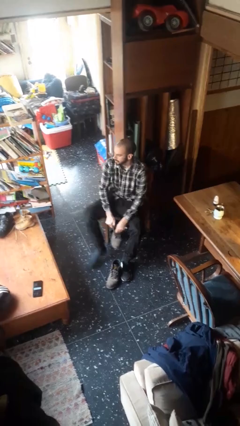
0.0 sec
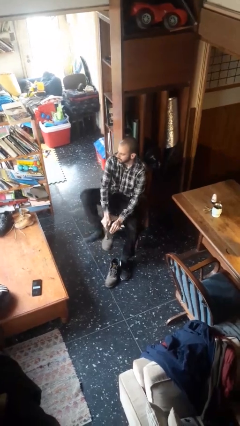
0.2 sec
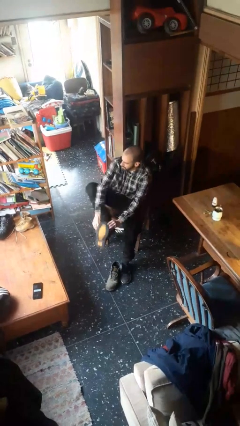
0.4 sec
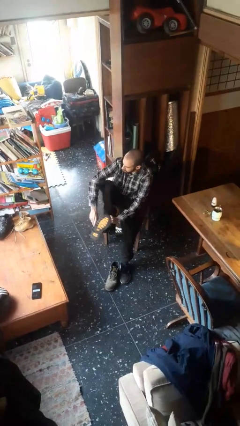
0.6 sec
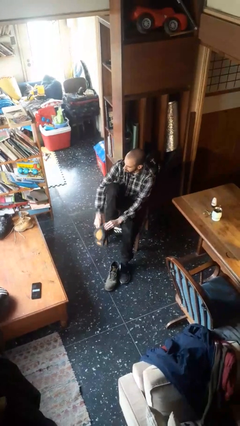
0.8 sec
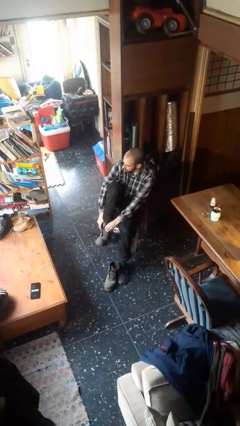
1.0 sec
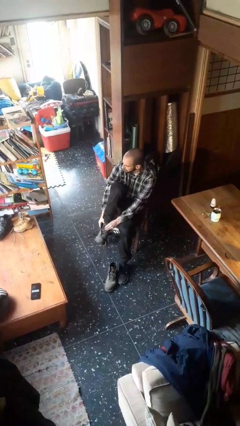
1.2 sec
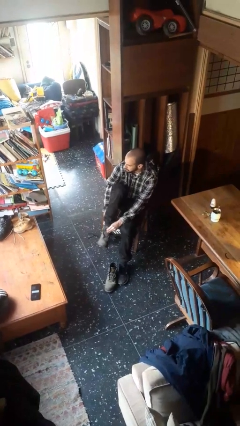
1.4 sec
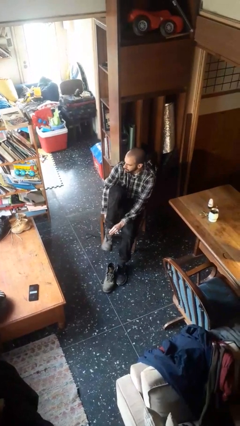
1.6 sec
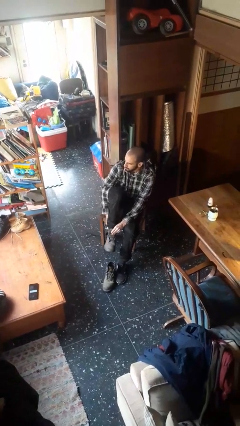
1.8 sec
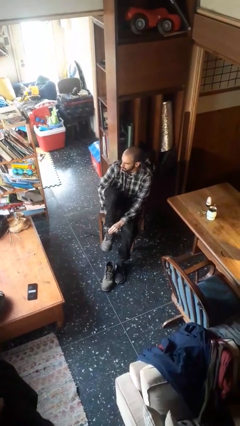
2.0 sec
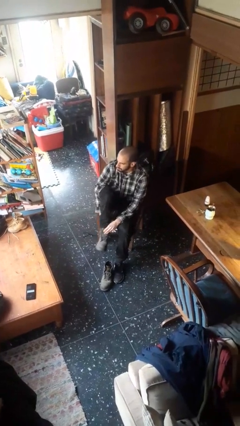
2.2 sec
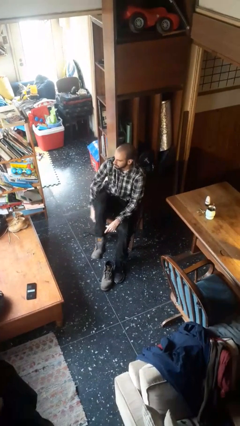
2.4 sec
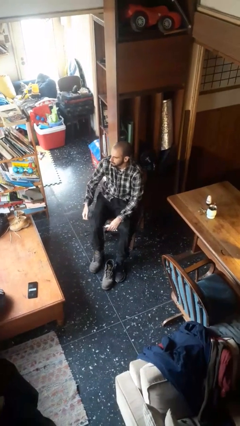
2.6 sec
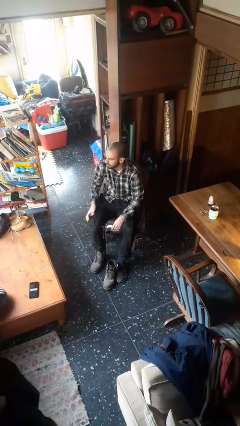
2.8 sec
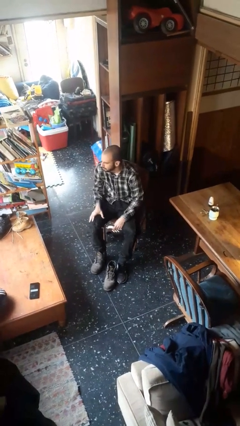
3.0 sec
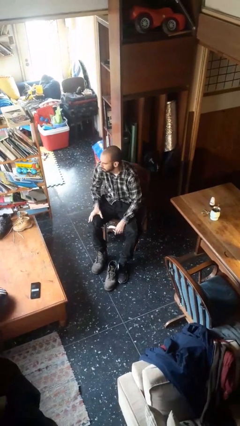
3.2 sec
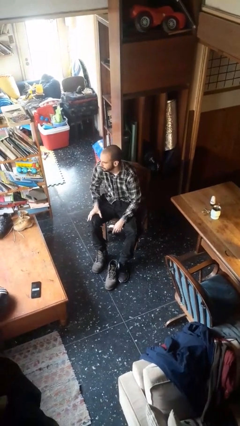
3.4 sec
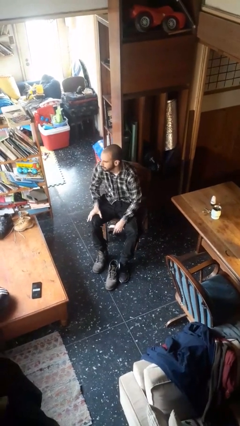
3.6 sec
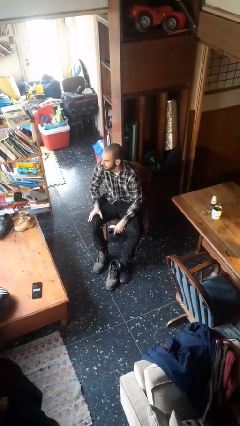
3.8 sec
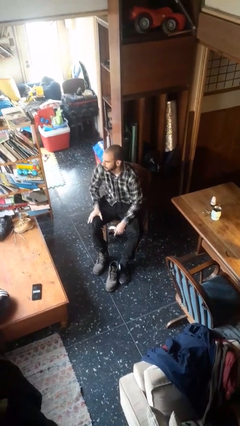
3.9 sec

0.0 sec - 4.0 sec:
person puts on boots

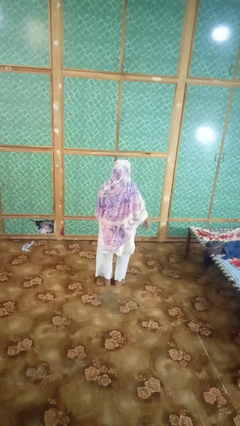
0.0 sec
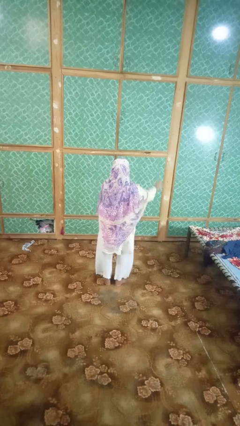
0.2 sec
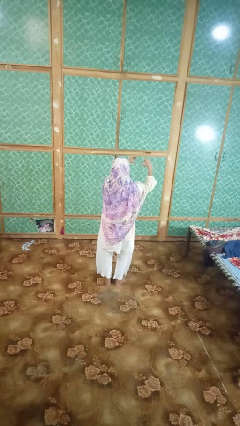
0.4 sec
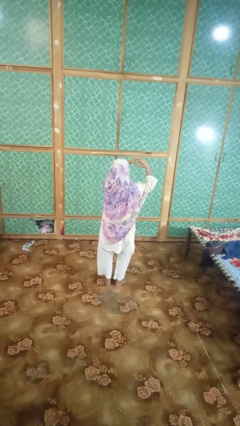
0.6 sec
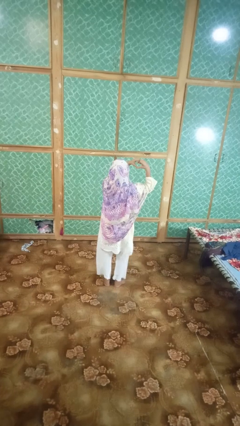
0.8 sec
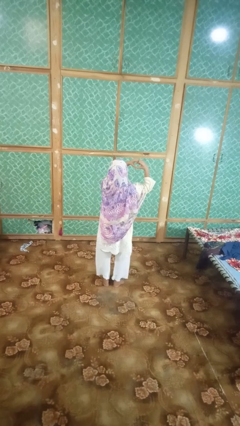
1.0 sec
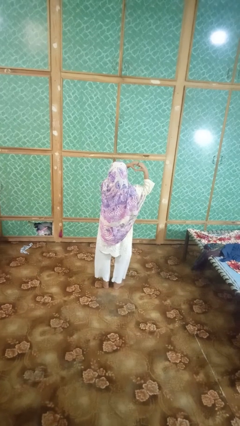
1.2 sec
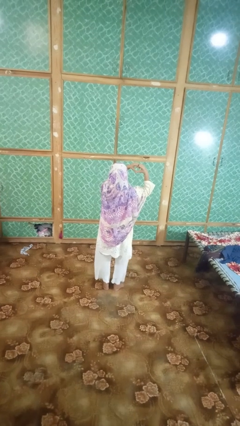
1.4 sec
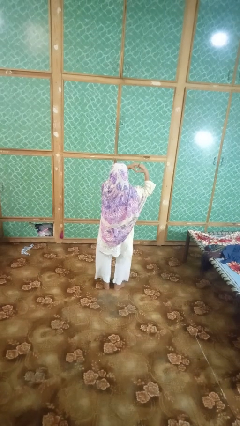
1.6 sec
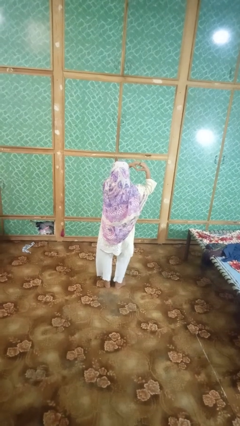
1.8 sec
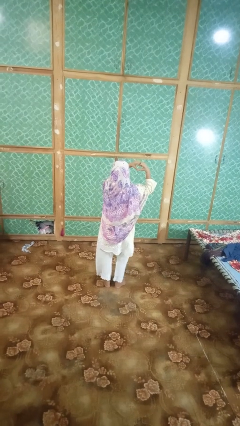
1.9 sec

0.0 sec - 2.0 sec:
person gestures heart

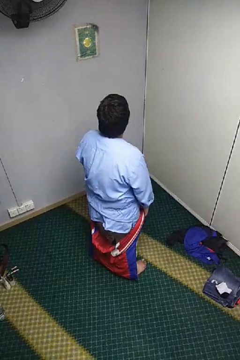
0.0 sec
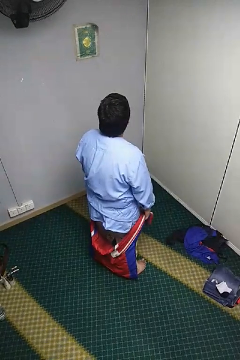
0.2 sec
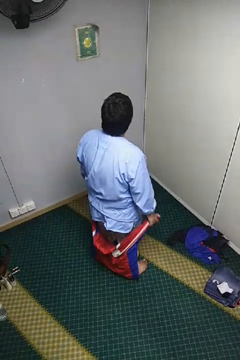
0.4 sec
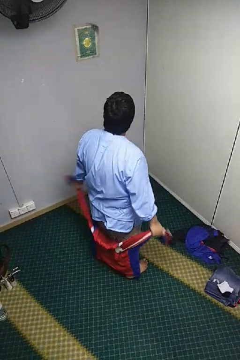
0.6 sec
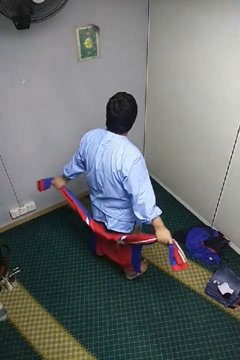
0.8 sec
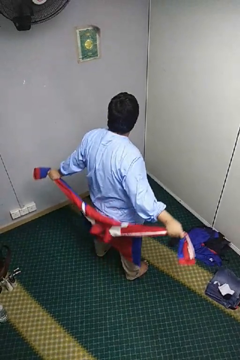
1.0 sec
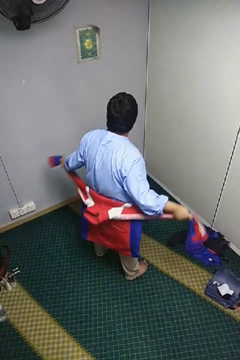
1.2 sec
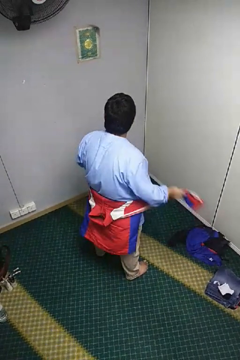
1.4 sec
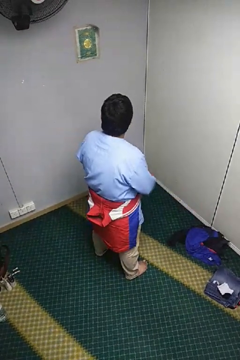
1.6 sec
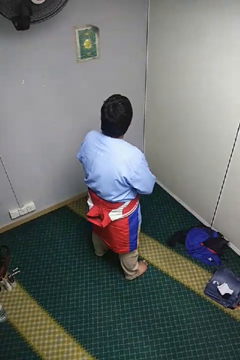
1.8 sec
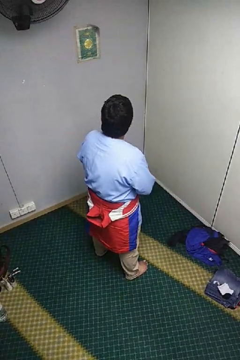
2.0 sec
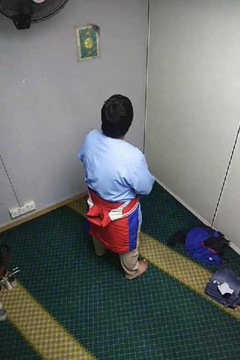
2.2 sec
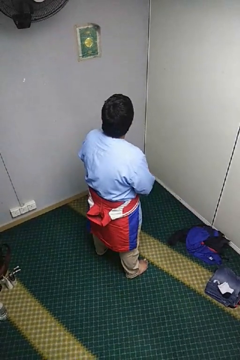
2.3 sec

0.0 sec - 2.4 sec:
person ties jacket around waist

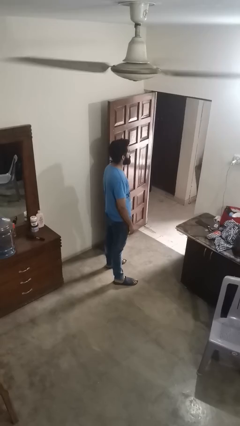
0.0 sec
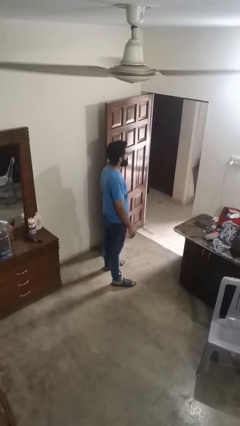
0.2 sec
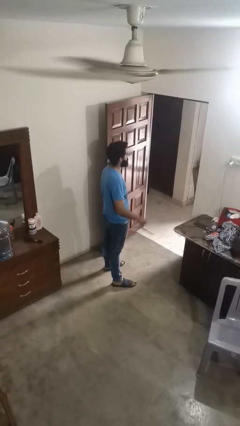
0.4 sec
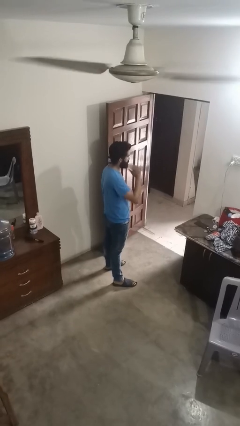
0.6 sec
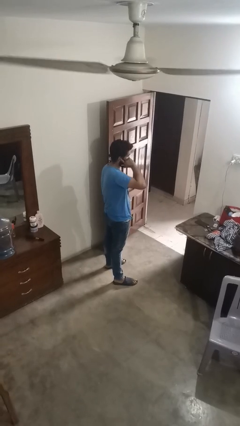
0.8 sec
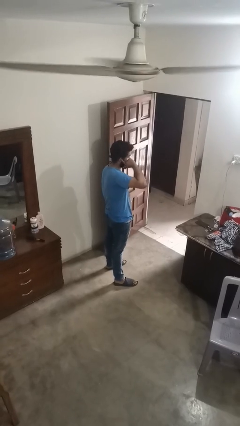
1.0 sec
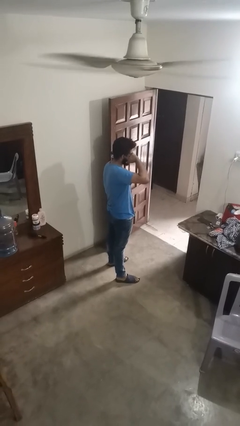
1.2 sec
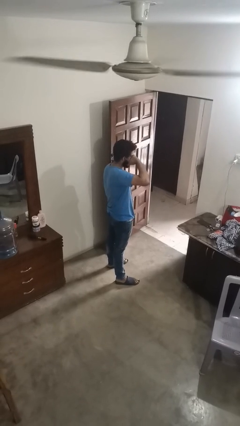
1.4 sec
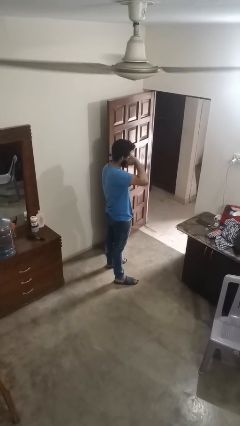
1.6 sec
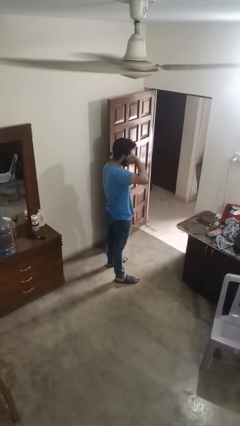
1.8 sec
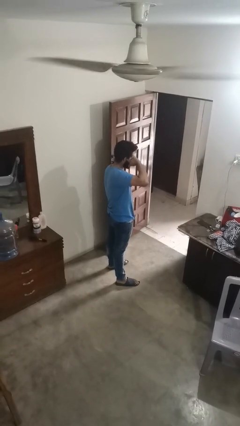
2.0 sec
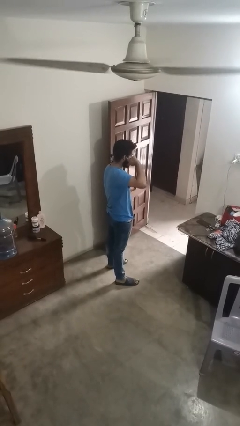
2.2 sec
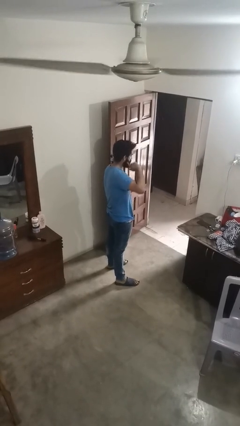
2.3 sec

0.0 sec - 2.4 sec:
person touches earlobe

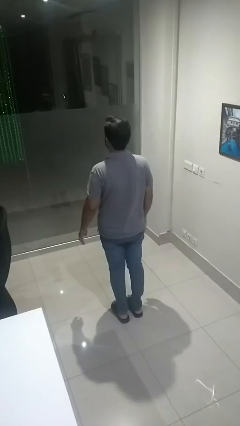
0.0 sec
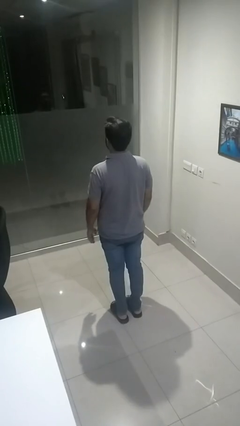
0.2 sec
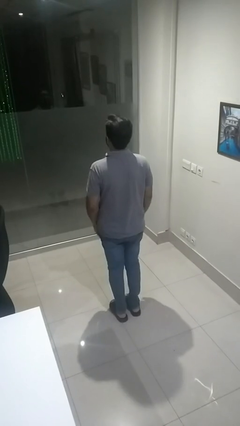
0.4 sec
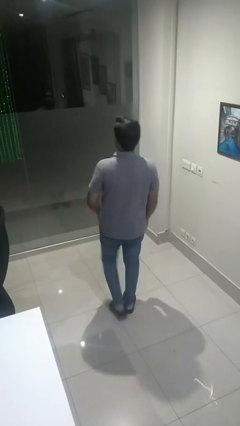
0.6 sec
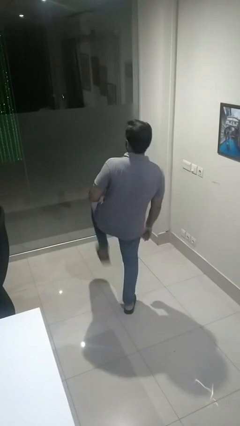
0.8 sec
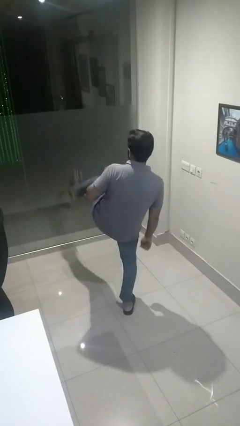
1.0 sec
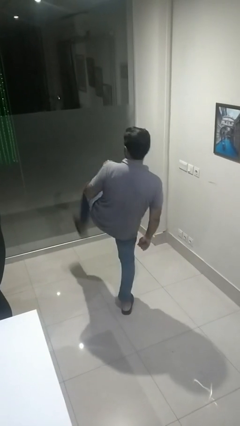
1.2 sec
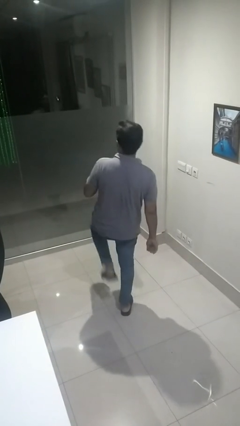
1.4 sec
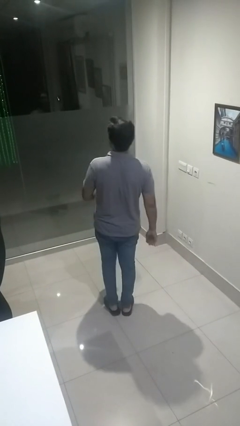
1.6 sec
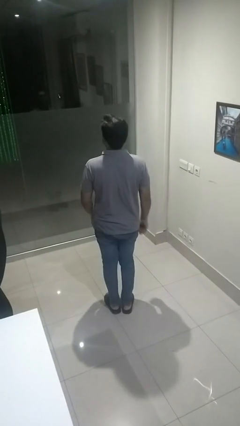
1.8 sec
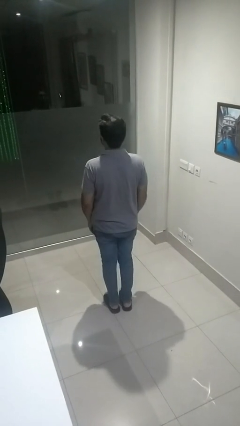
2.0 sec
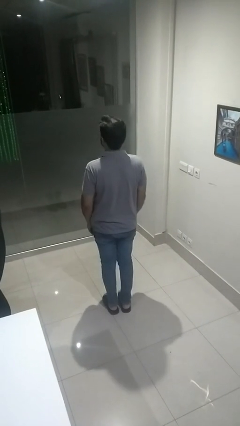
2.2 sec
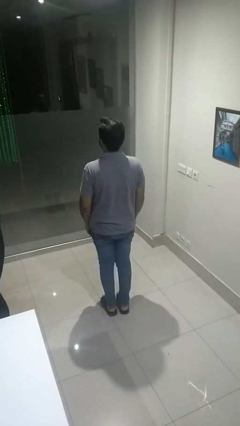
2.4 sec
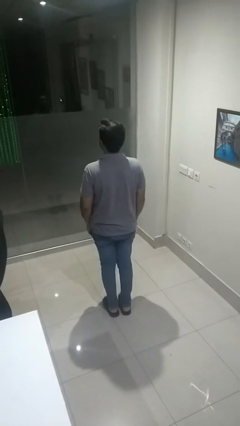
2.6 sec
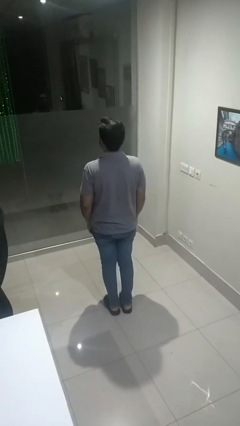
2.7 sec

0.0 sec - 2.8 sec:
person karate kicks

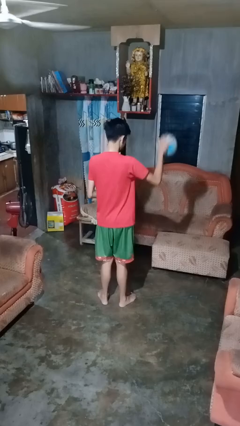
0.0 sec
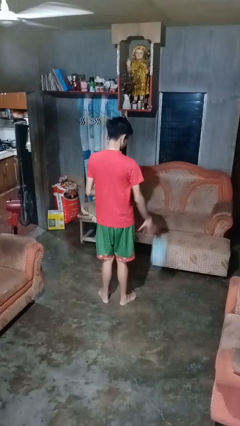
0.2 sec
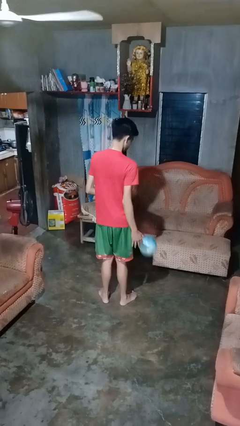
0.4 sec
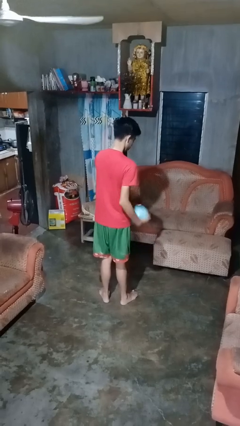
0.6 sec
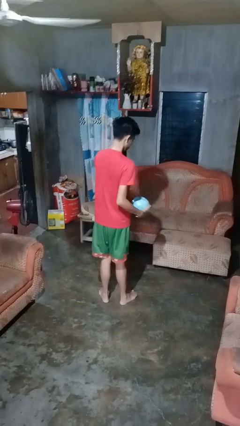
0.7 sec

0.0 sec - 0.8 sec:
person bounces ball on floor

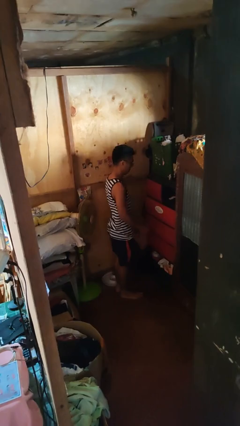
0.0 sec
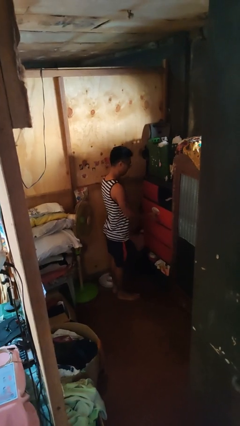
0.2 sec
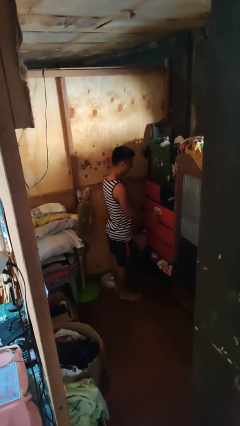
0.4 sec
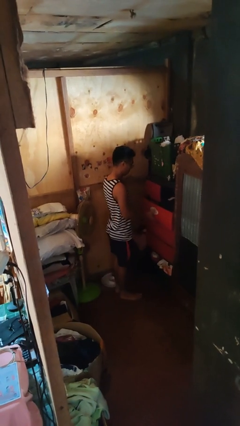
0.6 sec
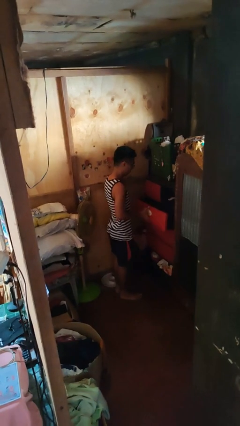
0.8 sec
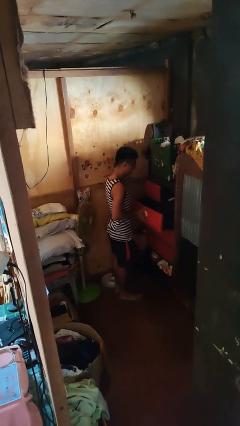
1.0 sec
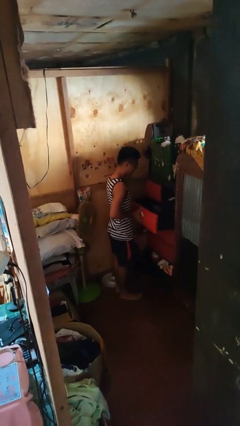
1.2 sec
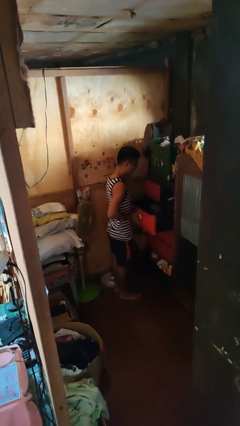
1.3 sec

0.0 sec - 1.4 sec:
person opens dresser drawer

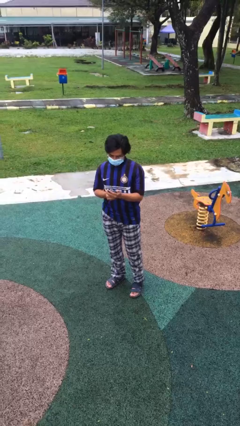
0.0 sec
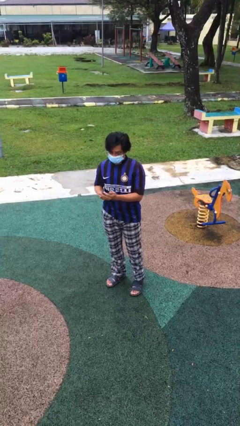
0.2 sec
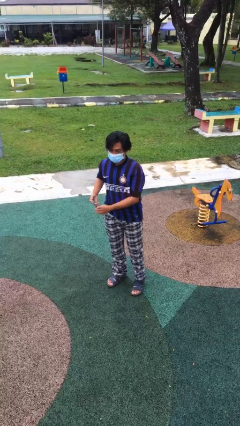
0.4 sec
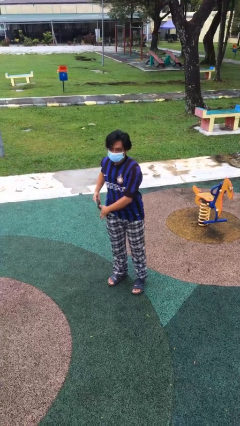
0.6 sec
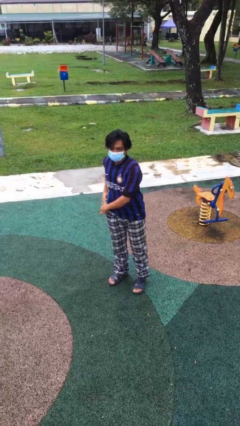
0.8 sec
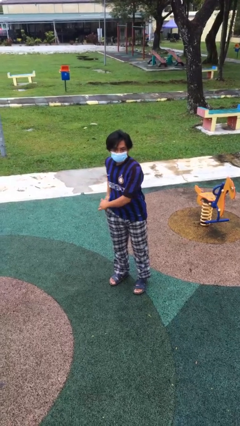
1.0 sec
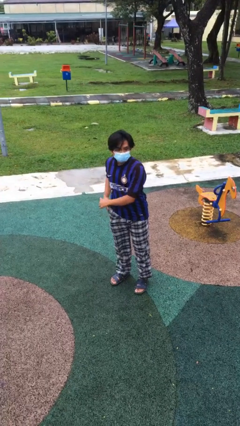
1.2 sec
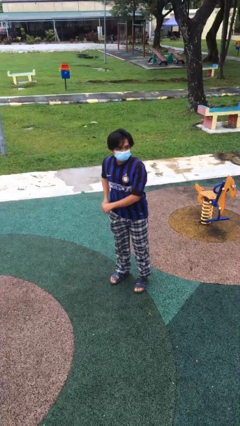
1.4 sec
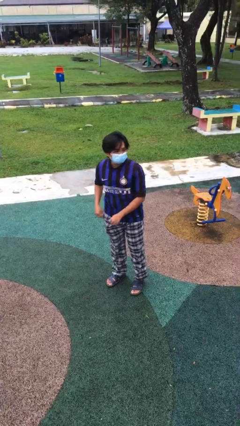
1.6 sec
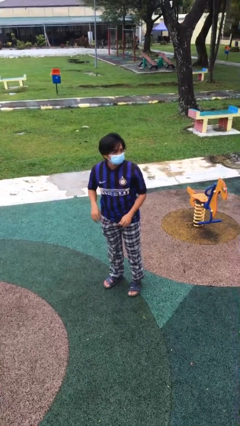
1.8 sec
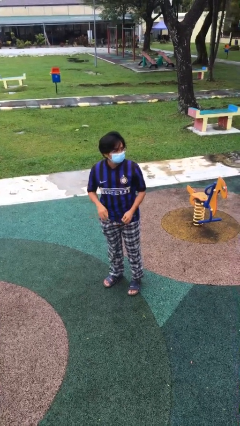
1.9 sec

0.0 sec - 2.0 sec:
person puts phone into pocket
